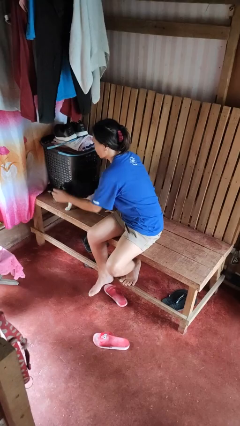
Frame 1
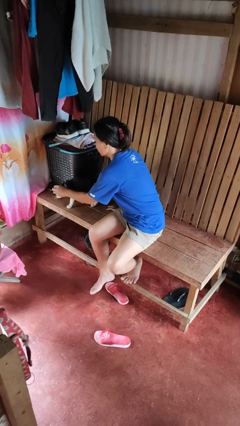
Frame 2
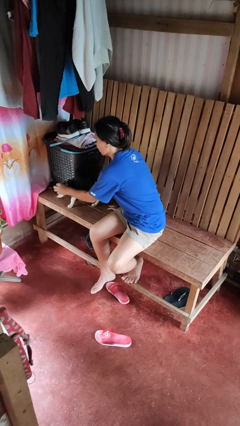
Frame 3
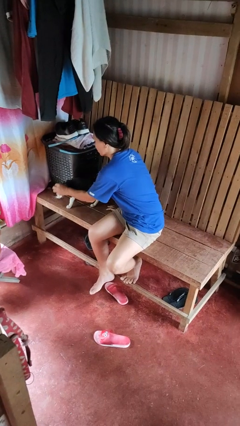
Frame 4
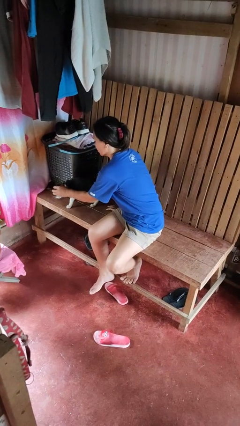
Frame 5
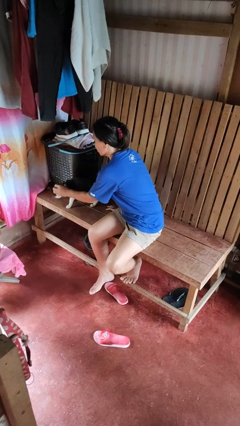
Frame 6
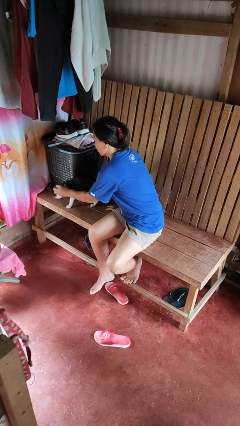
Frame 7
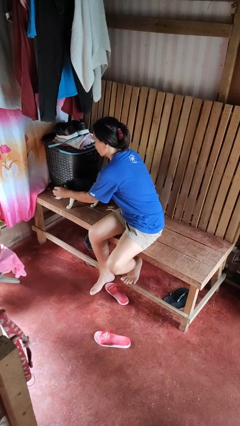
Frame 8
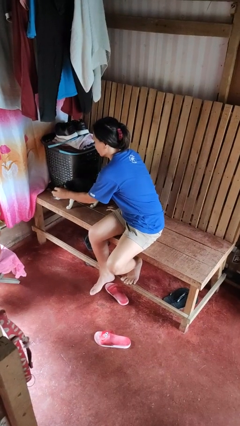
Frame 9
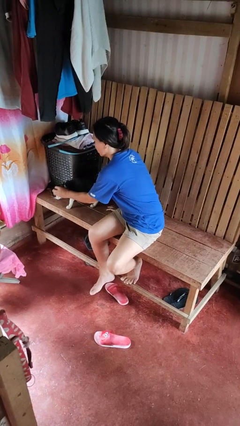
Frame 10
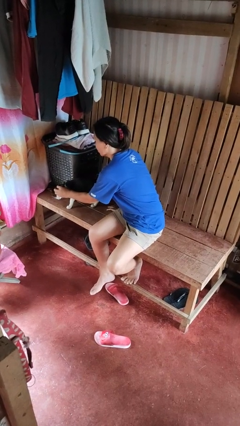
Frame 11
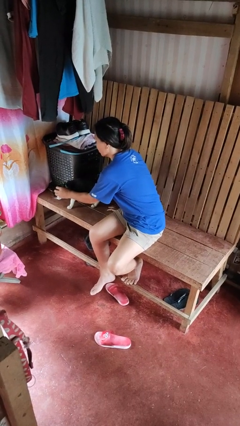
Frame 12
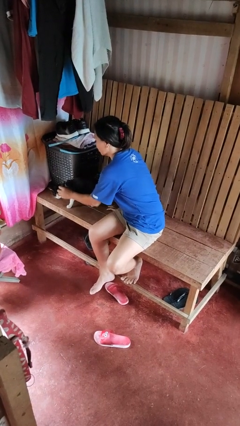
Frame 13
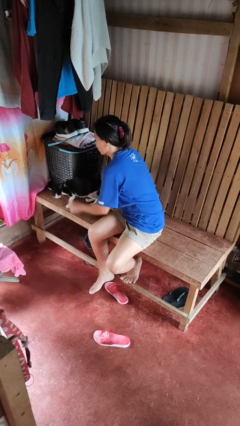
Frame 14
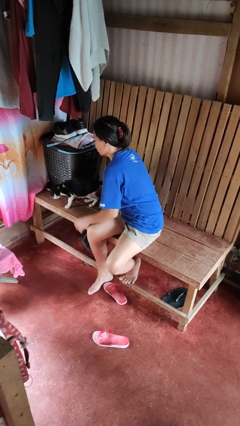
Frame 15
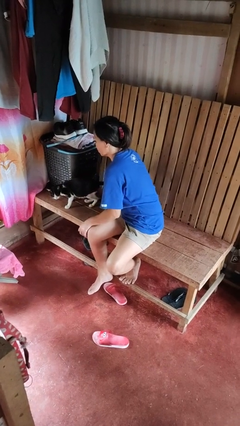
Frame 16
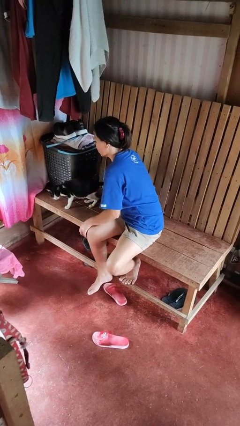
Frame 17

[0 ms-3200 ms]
person pets cat

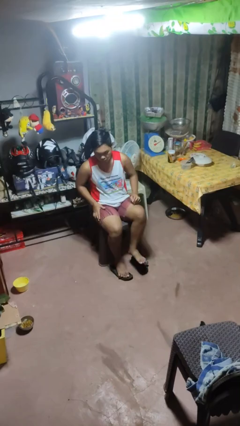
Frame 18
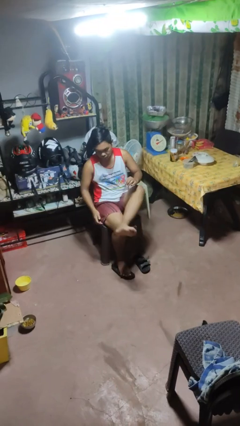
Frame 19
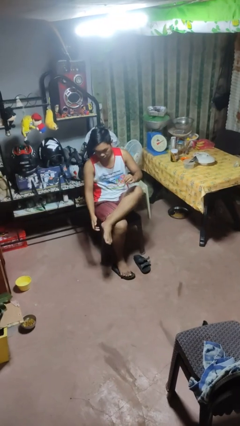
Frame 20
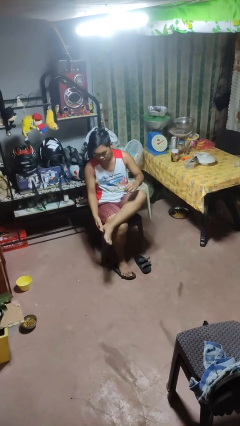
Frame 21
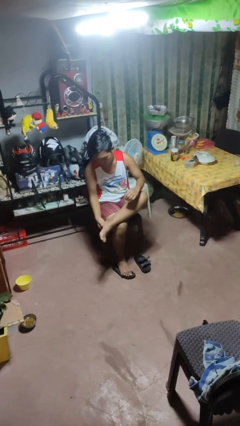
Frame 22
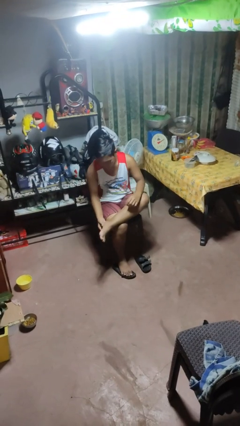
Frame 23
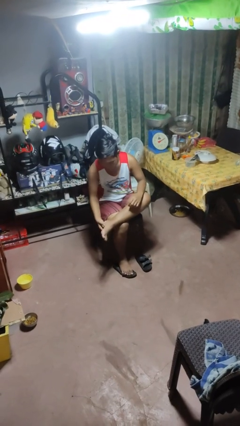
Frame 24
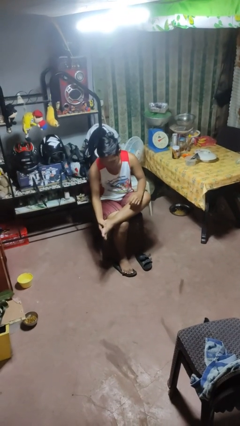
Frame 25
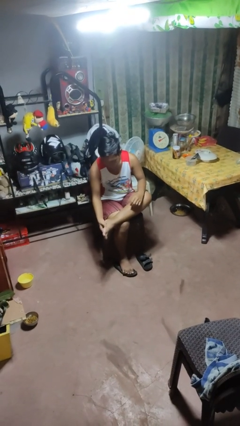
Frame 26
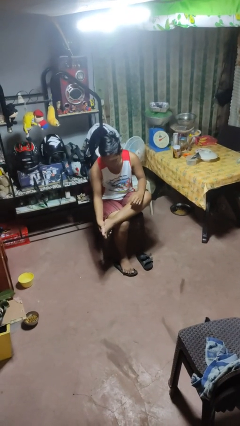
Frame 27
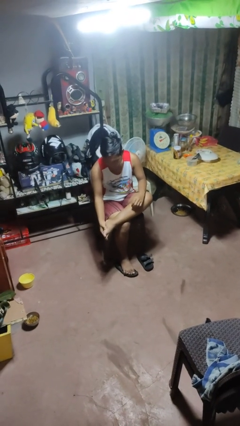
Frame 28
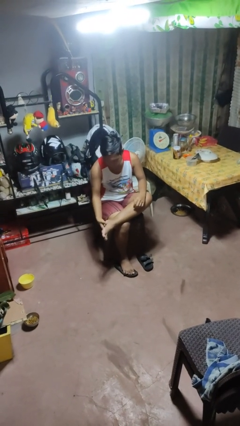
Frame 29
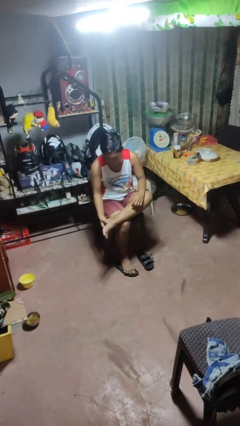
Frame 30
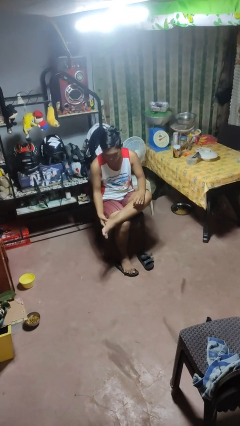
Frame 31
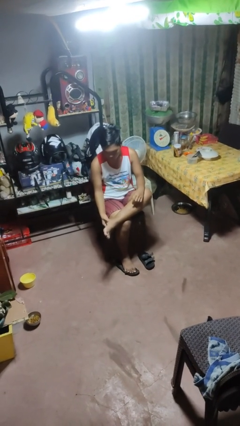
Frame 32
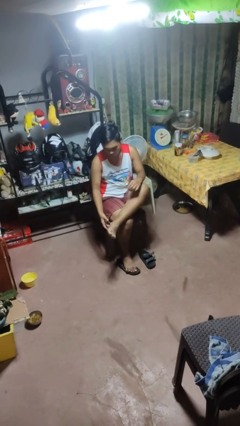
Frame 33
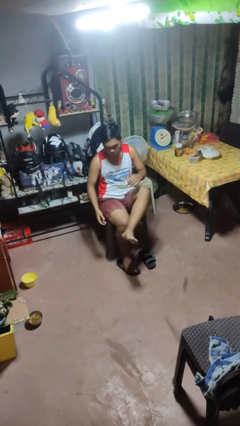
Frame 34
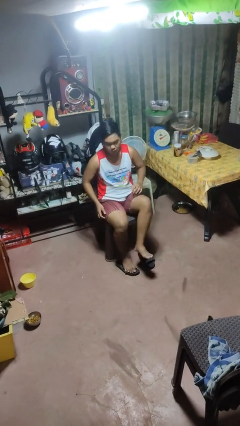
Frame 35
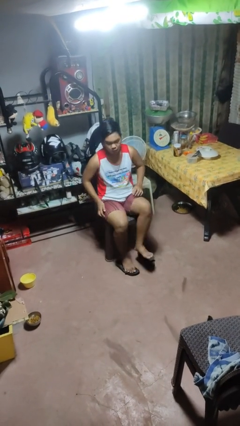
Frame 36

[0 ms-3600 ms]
person rubs foot

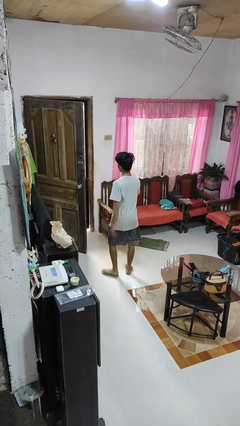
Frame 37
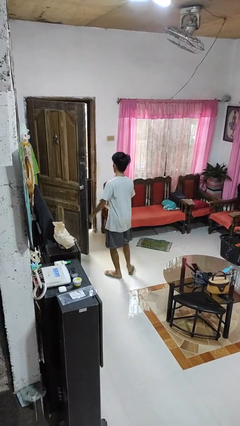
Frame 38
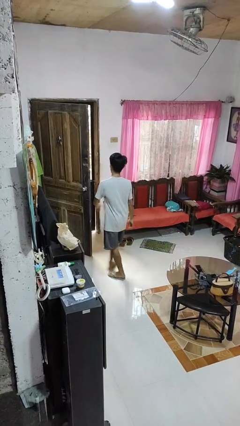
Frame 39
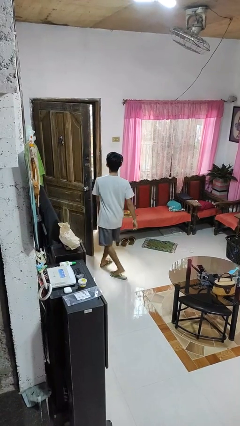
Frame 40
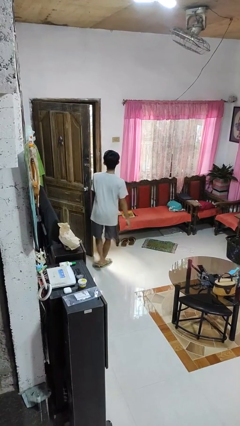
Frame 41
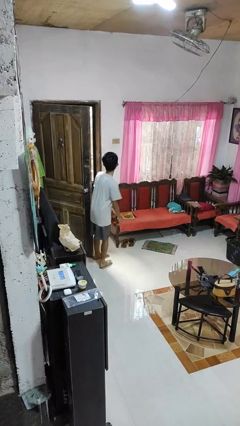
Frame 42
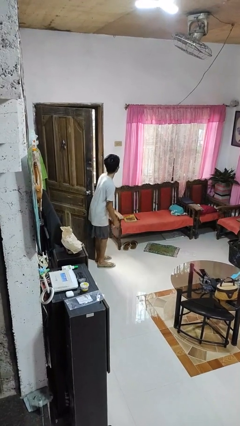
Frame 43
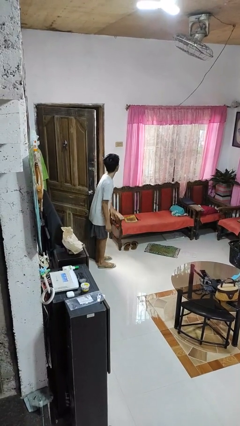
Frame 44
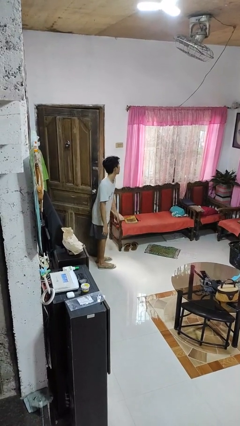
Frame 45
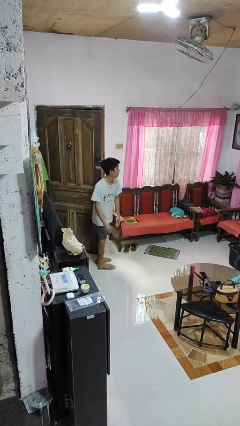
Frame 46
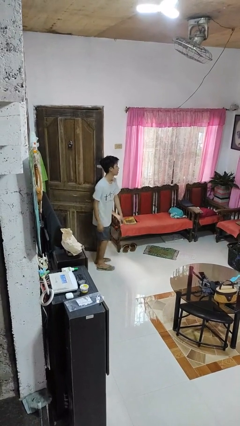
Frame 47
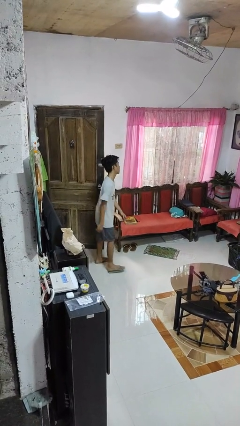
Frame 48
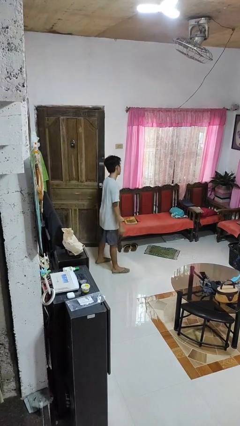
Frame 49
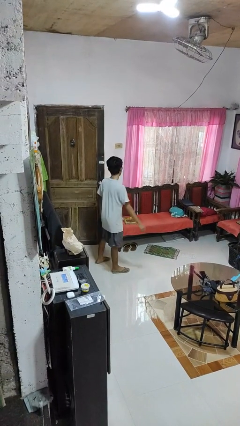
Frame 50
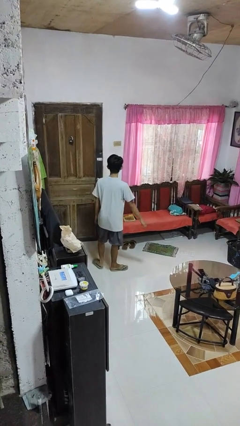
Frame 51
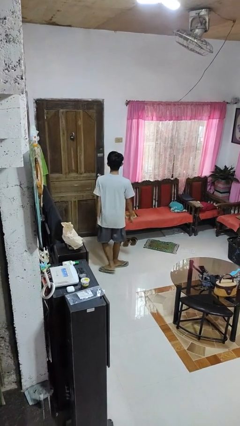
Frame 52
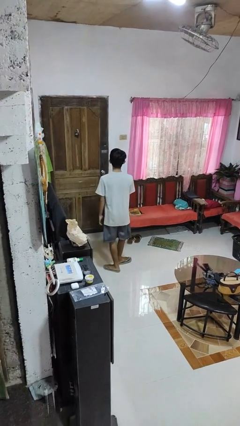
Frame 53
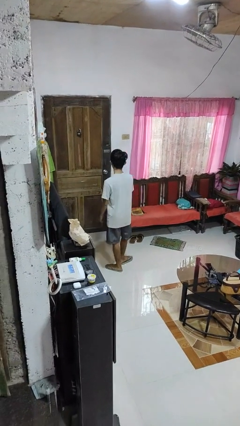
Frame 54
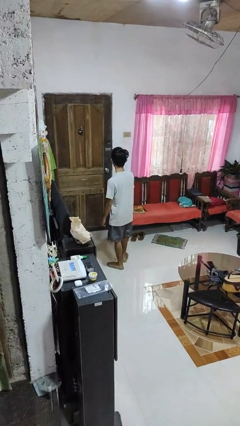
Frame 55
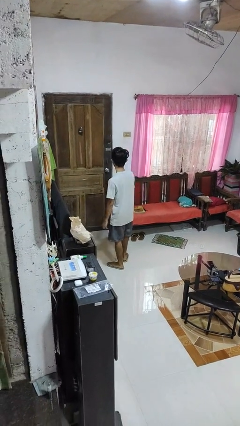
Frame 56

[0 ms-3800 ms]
person closes door with hip

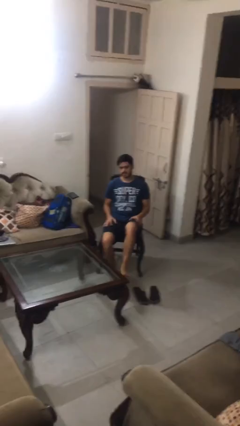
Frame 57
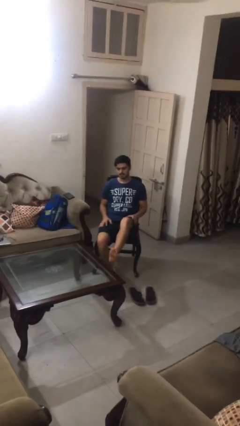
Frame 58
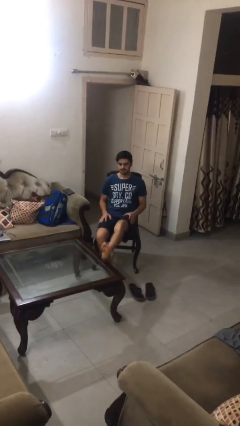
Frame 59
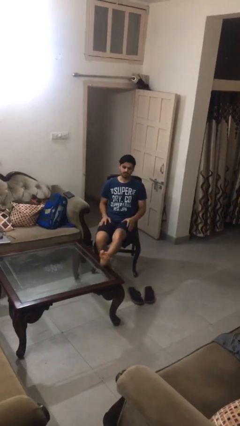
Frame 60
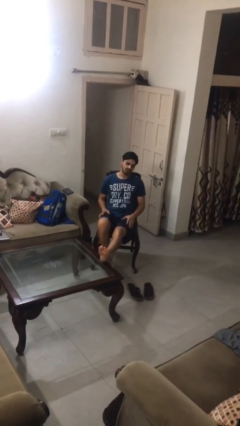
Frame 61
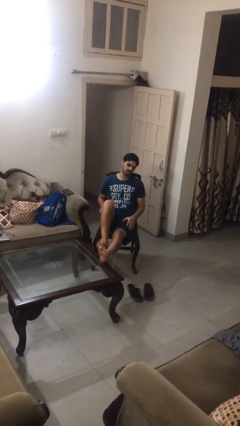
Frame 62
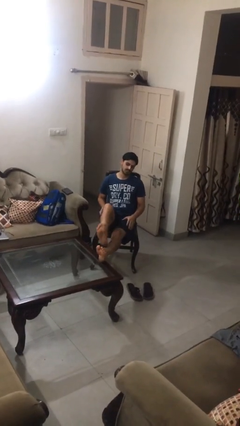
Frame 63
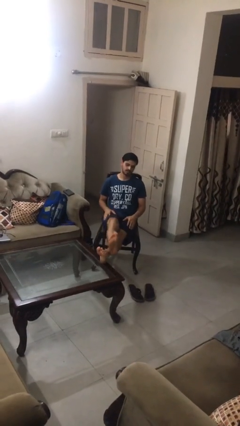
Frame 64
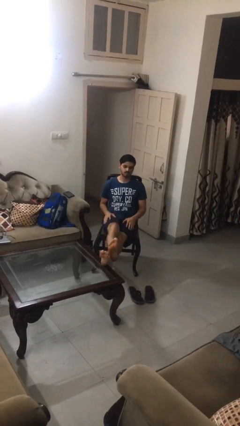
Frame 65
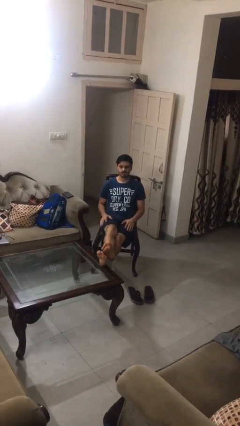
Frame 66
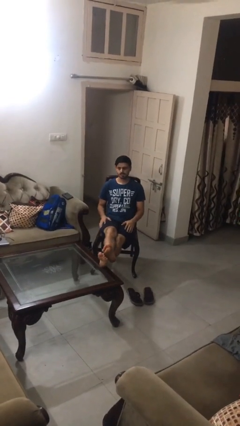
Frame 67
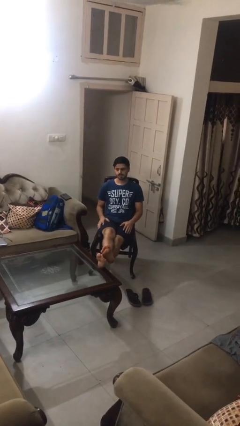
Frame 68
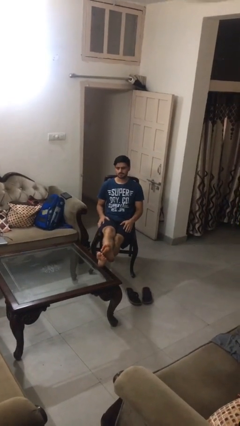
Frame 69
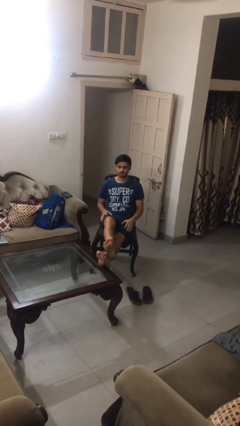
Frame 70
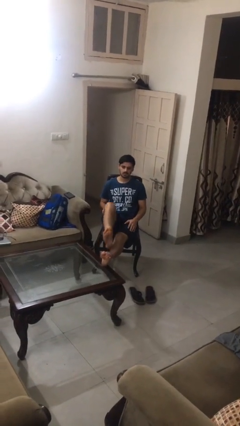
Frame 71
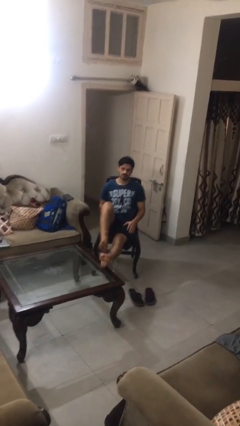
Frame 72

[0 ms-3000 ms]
person puts feet up

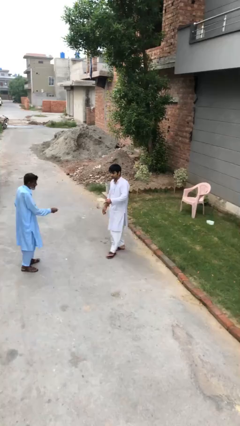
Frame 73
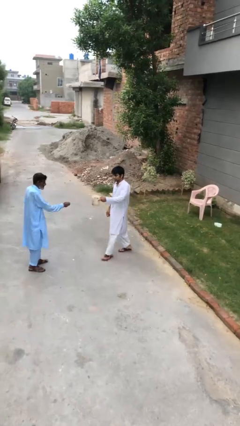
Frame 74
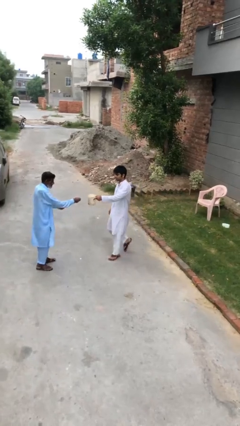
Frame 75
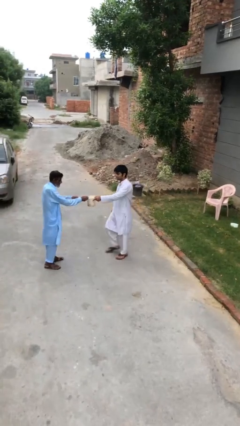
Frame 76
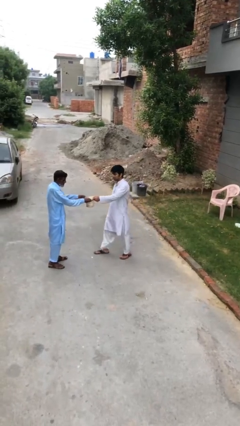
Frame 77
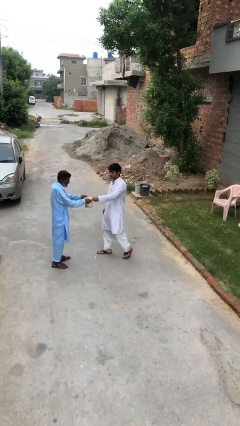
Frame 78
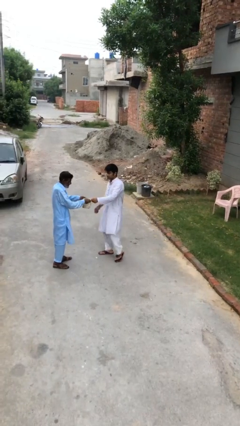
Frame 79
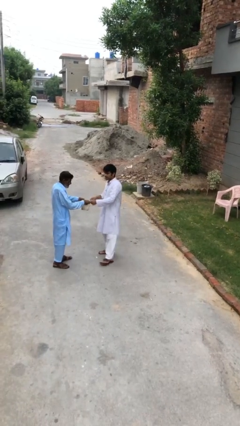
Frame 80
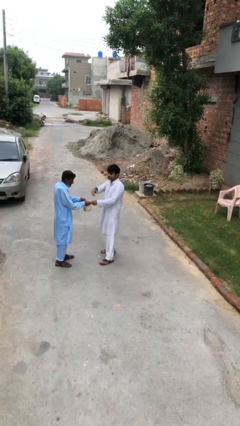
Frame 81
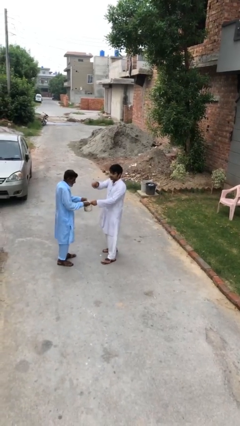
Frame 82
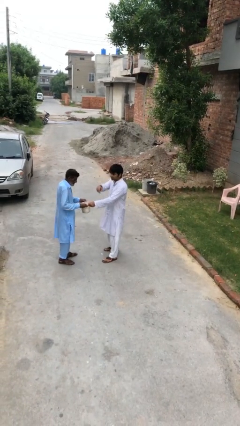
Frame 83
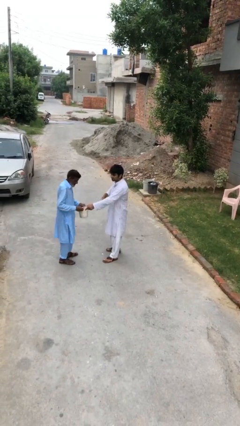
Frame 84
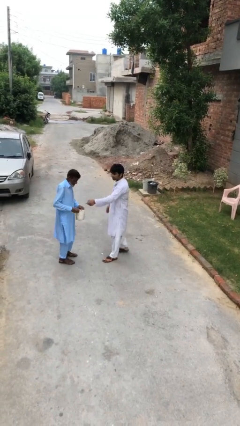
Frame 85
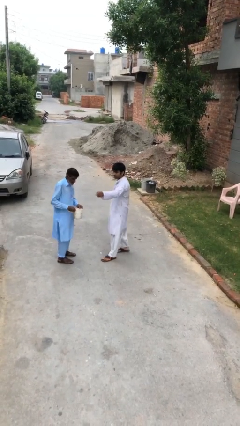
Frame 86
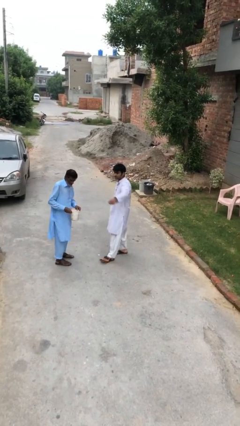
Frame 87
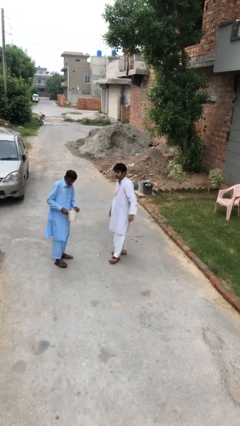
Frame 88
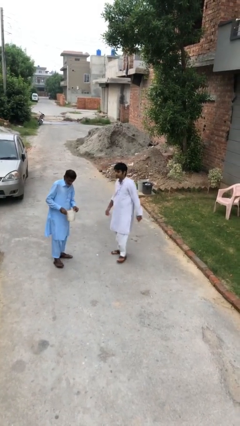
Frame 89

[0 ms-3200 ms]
person transfers object to person

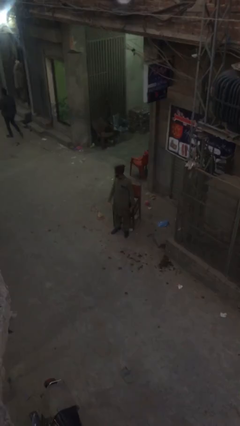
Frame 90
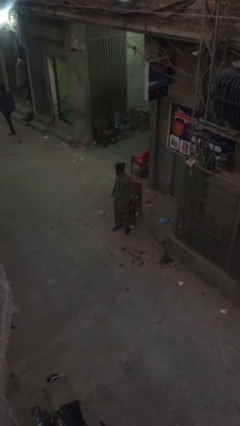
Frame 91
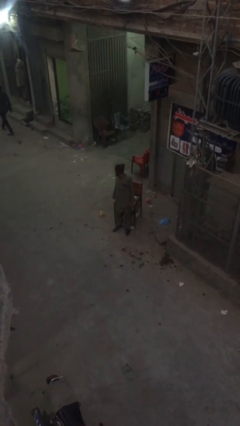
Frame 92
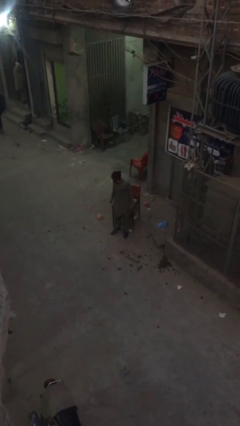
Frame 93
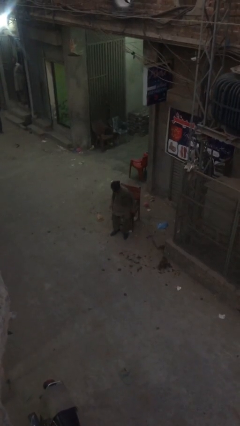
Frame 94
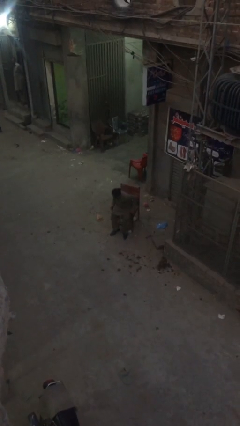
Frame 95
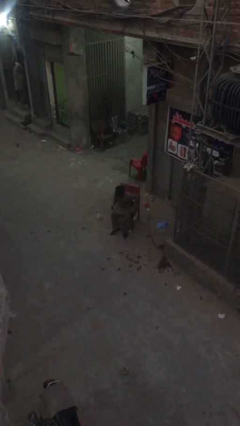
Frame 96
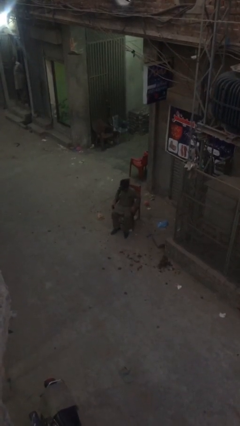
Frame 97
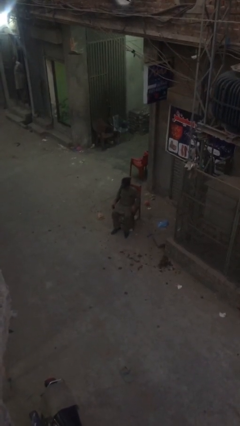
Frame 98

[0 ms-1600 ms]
person sits down
